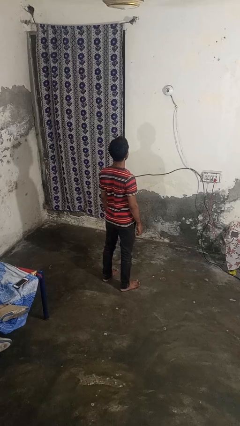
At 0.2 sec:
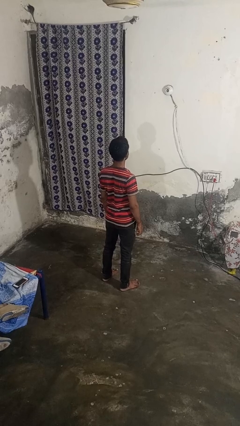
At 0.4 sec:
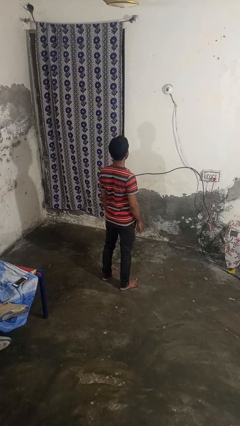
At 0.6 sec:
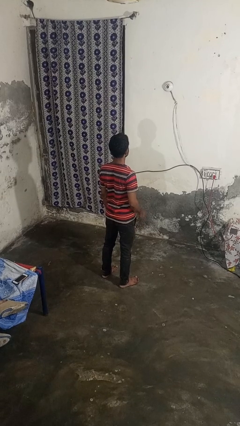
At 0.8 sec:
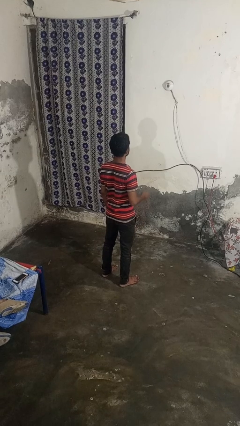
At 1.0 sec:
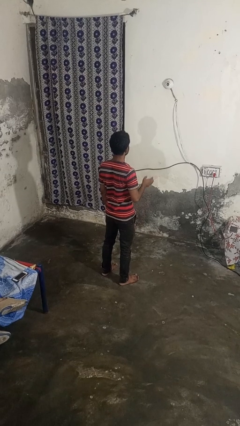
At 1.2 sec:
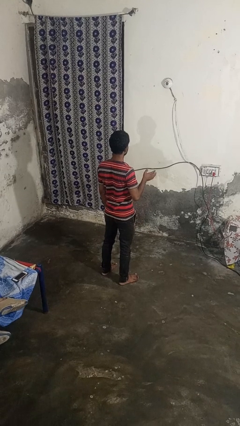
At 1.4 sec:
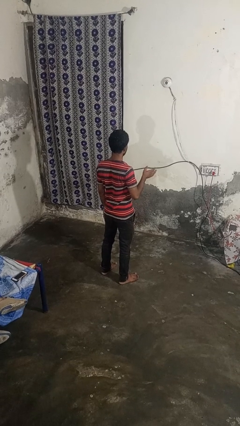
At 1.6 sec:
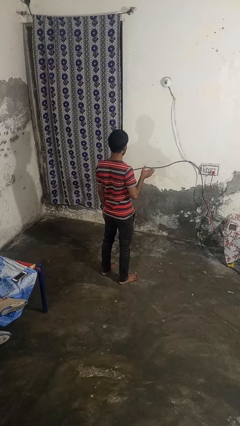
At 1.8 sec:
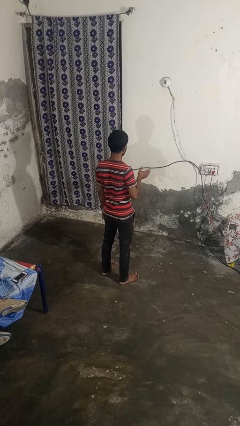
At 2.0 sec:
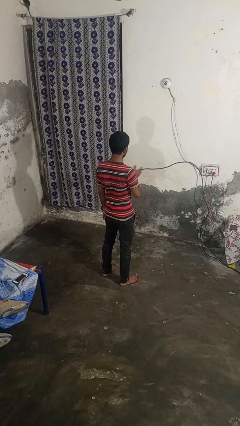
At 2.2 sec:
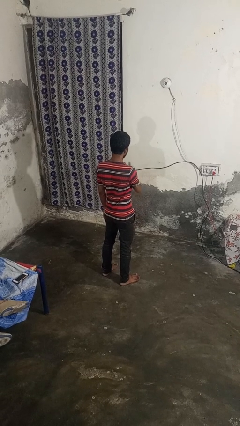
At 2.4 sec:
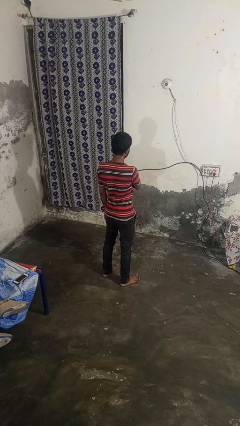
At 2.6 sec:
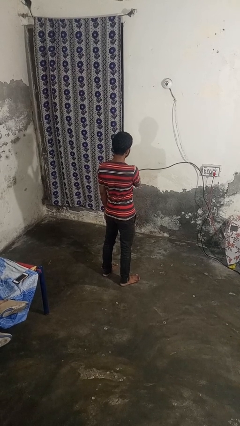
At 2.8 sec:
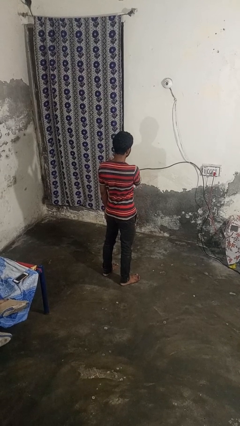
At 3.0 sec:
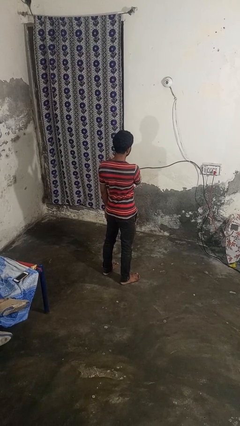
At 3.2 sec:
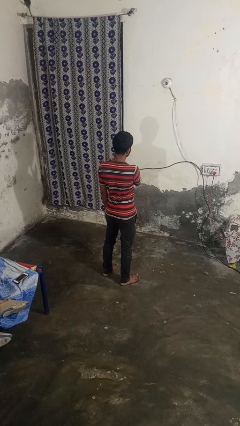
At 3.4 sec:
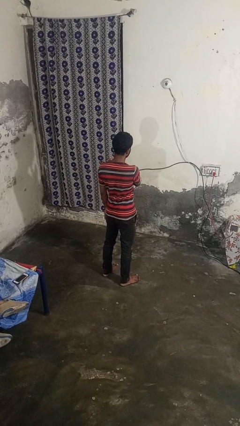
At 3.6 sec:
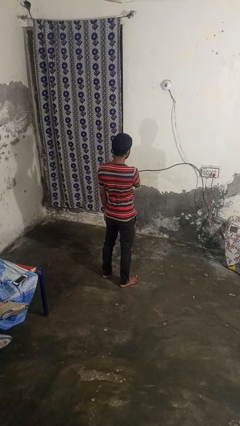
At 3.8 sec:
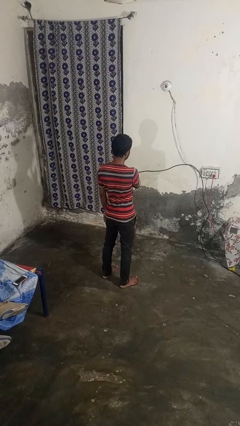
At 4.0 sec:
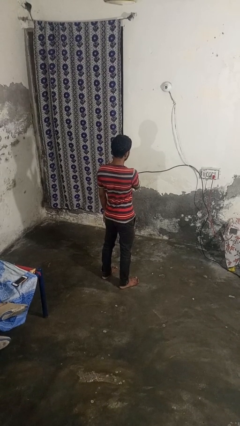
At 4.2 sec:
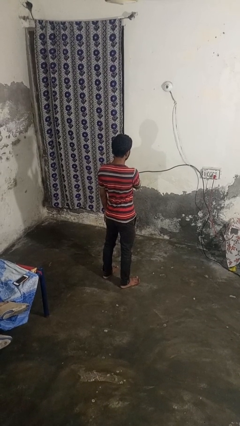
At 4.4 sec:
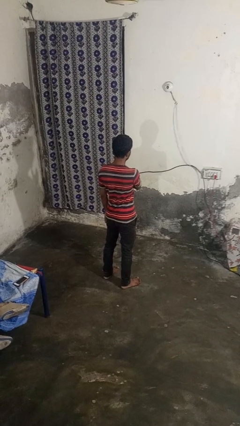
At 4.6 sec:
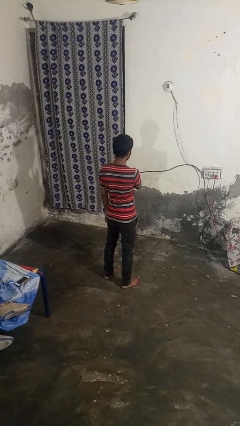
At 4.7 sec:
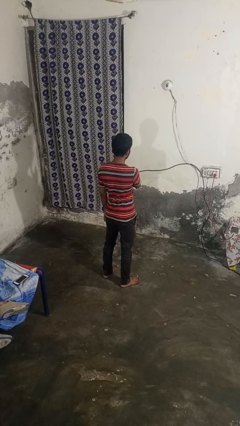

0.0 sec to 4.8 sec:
person gestures swipe left

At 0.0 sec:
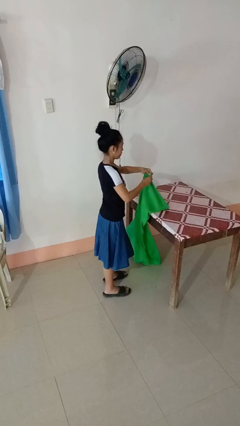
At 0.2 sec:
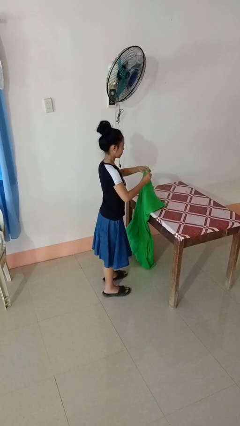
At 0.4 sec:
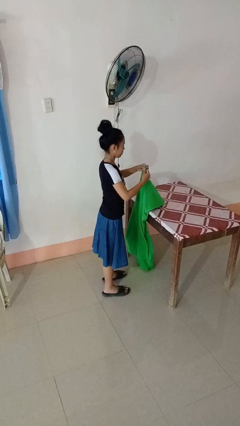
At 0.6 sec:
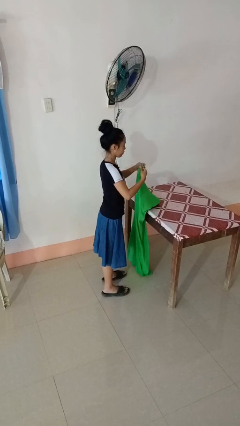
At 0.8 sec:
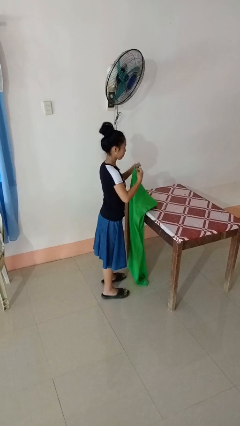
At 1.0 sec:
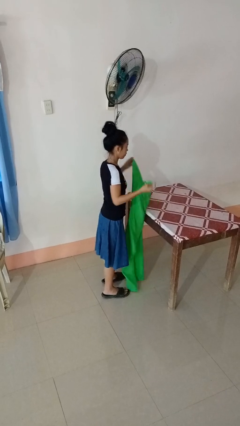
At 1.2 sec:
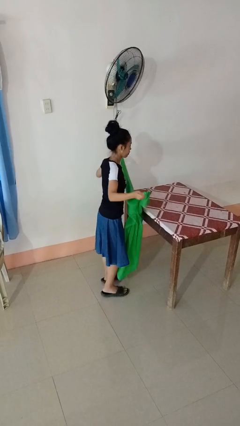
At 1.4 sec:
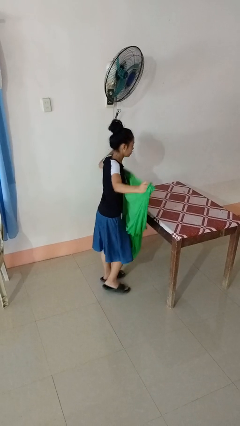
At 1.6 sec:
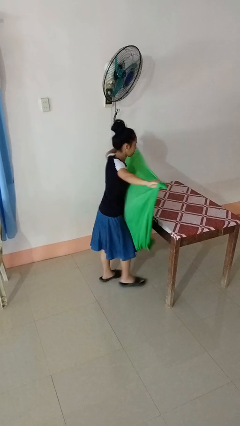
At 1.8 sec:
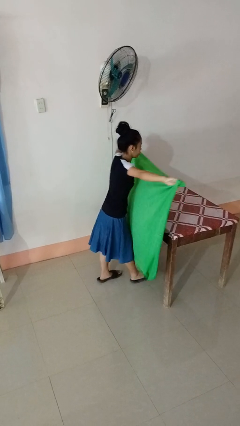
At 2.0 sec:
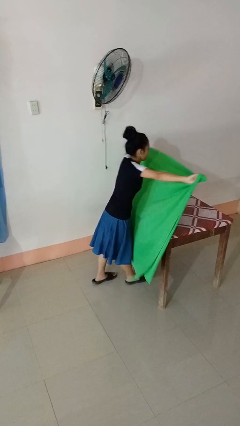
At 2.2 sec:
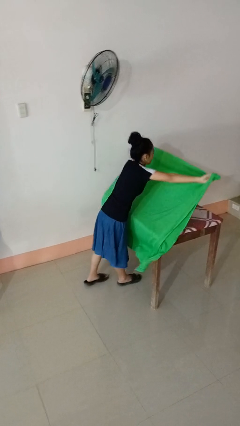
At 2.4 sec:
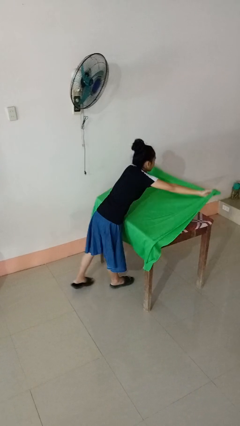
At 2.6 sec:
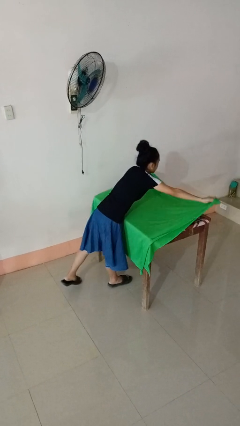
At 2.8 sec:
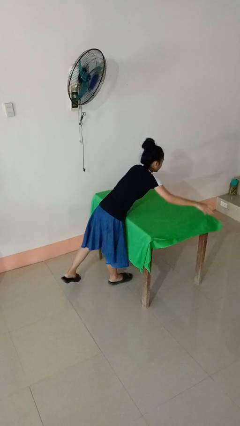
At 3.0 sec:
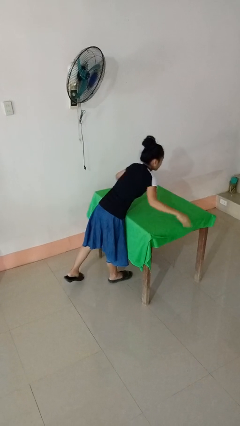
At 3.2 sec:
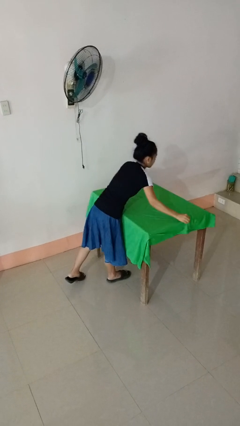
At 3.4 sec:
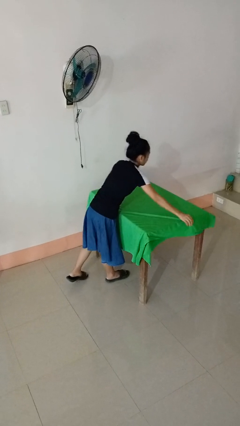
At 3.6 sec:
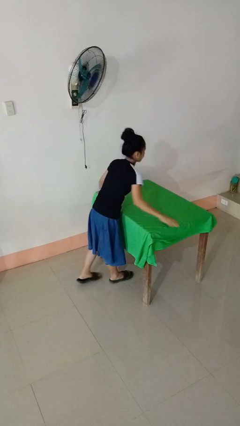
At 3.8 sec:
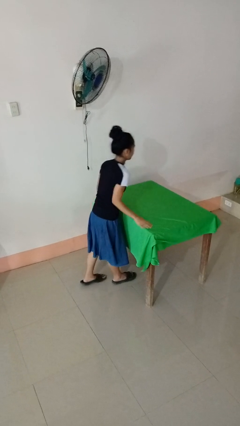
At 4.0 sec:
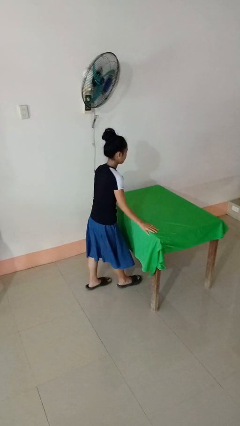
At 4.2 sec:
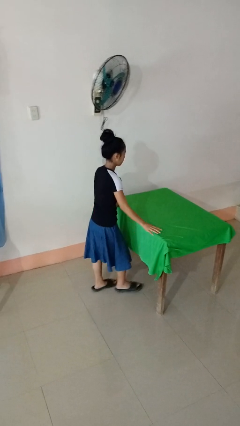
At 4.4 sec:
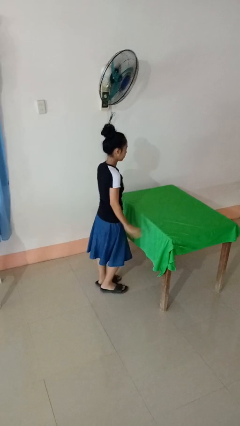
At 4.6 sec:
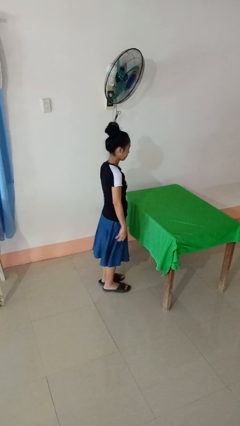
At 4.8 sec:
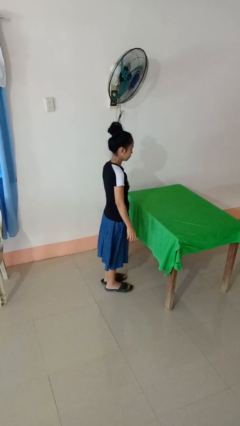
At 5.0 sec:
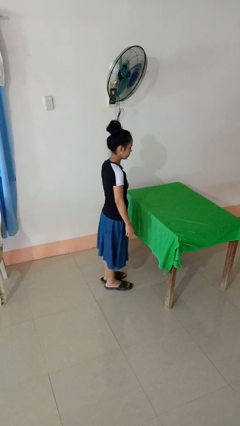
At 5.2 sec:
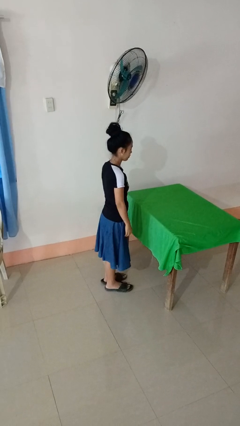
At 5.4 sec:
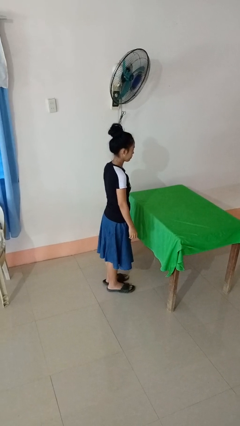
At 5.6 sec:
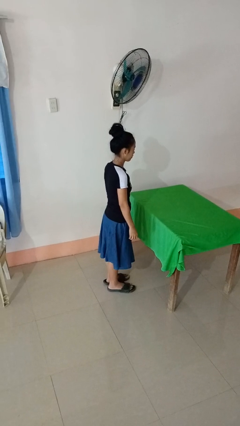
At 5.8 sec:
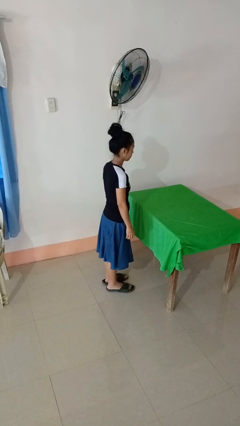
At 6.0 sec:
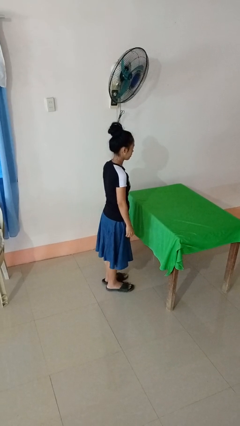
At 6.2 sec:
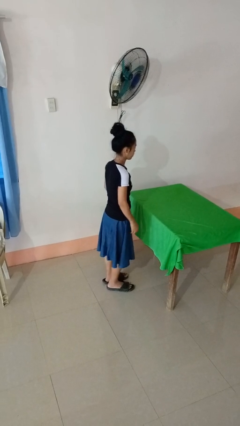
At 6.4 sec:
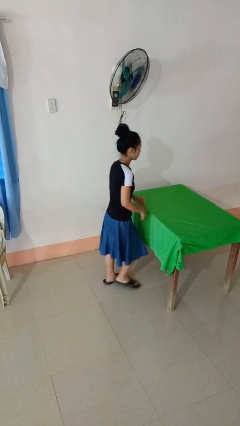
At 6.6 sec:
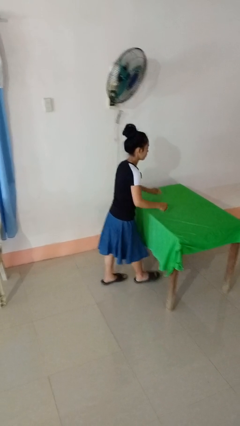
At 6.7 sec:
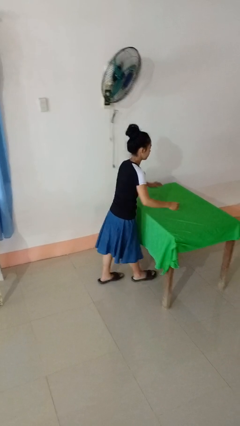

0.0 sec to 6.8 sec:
person spreads tablecloth

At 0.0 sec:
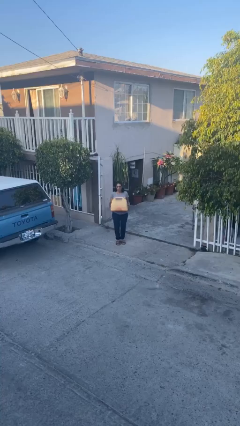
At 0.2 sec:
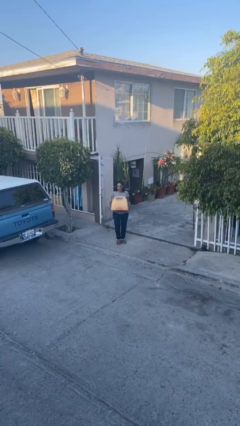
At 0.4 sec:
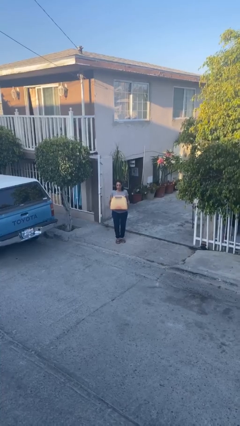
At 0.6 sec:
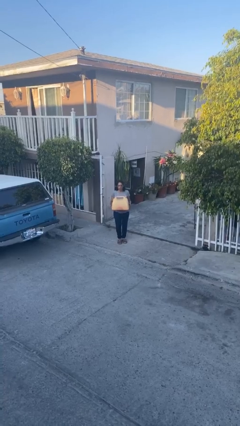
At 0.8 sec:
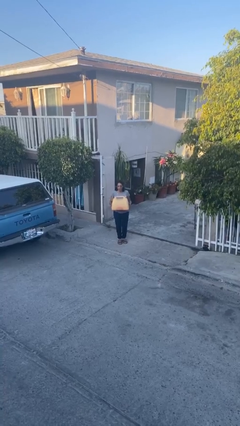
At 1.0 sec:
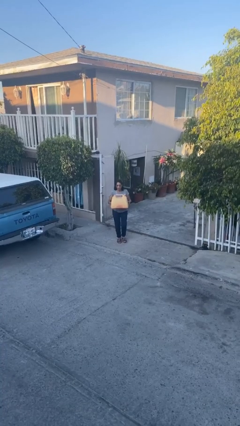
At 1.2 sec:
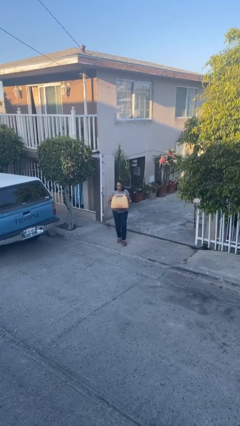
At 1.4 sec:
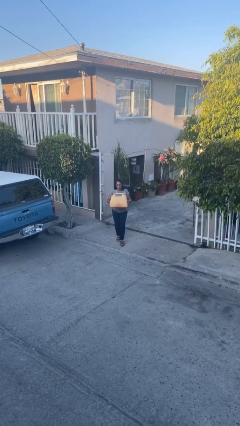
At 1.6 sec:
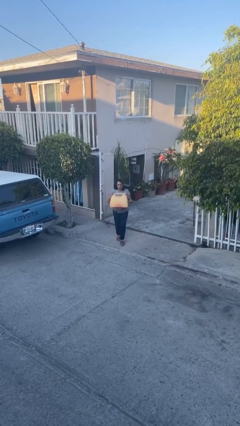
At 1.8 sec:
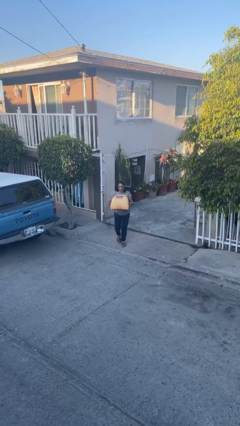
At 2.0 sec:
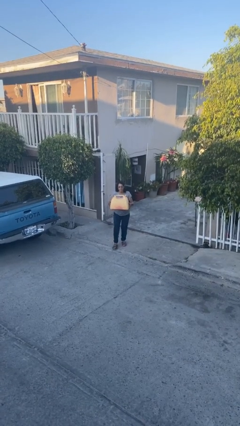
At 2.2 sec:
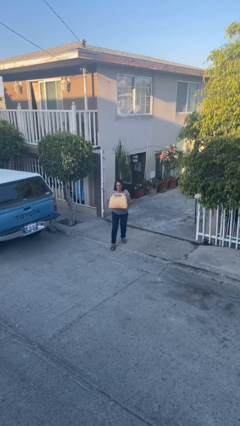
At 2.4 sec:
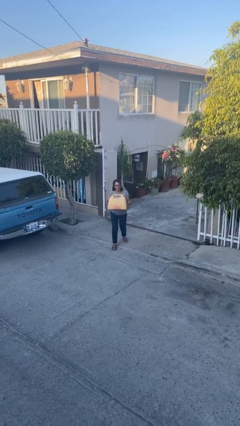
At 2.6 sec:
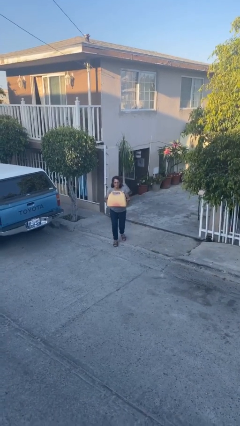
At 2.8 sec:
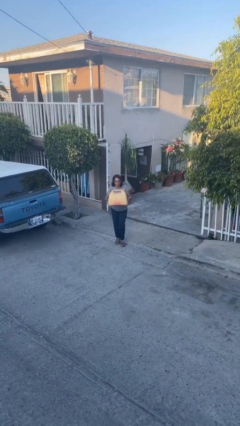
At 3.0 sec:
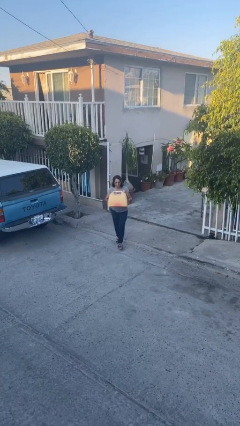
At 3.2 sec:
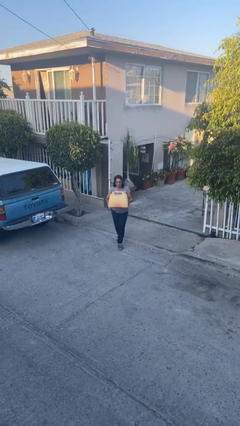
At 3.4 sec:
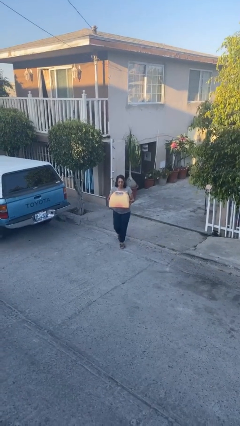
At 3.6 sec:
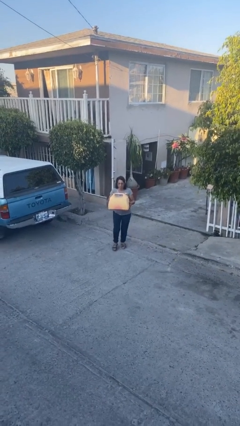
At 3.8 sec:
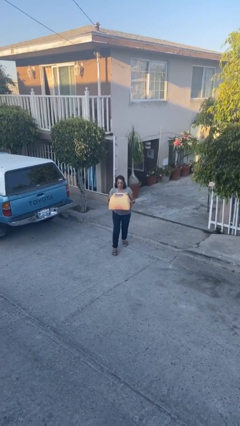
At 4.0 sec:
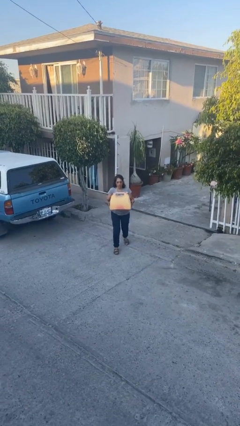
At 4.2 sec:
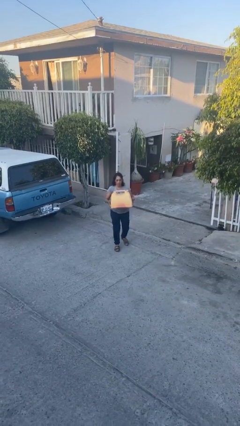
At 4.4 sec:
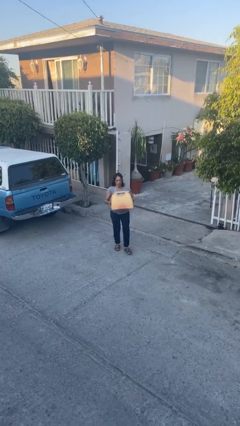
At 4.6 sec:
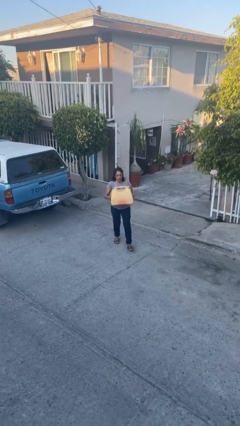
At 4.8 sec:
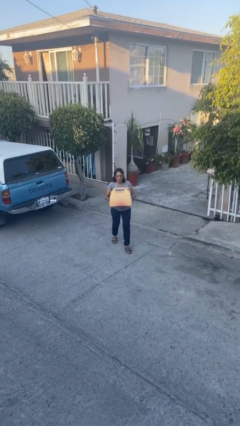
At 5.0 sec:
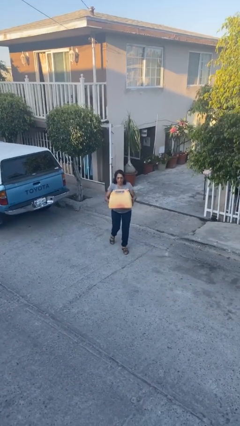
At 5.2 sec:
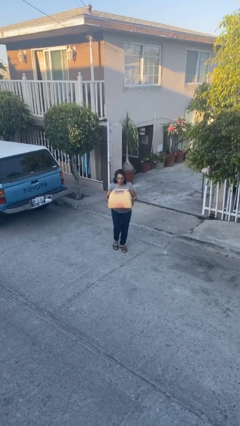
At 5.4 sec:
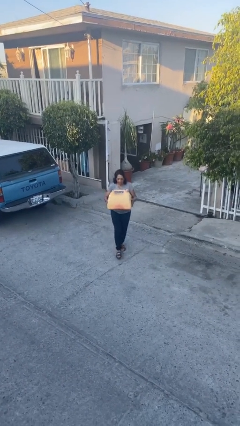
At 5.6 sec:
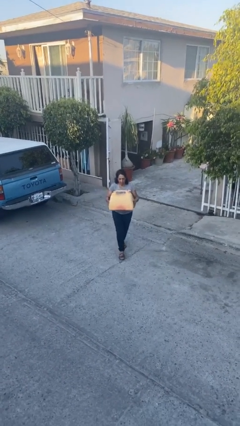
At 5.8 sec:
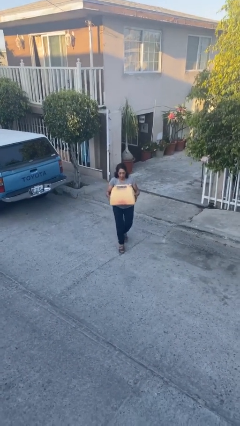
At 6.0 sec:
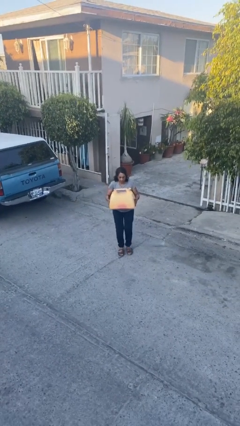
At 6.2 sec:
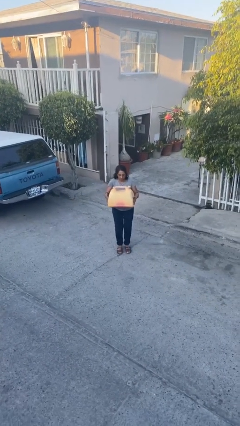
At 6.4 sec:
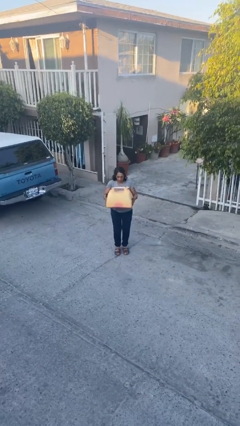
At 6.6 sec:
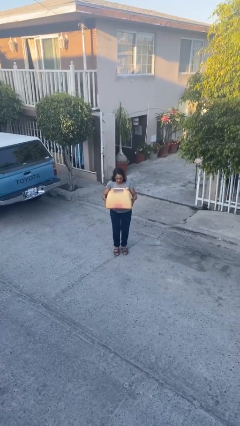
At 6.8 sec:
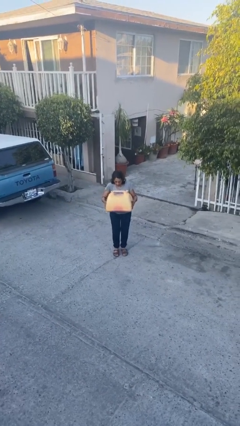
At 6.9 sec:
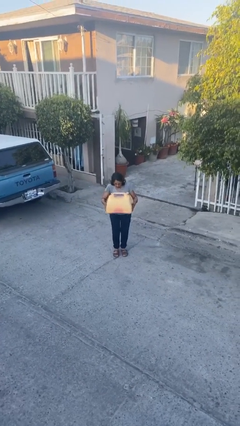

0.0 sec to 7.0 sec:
person carries heavy object
